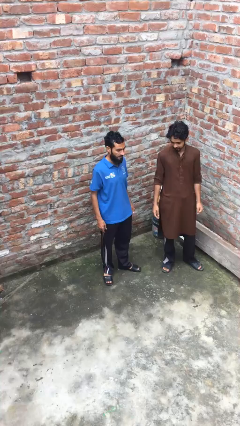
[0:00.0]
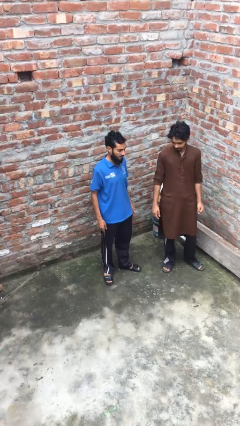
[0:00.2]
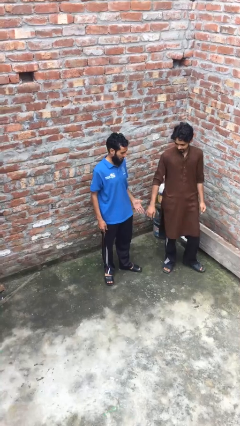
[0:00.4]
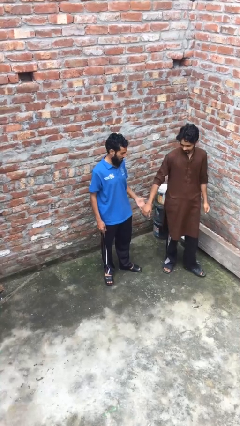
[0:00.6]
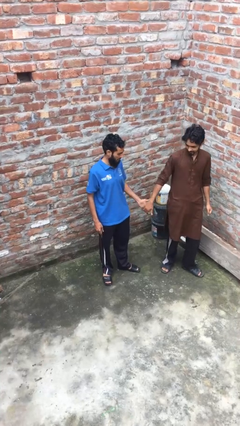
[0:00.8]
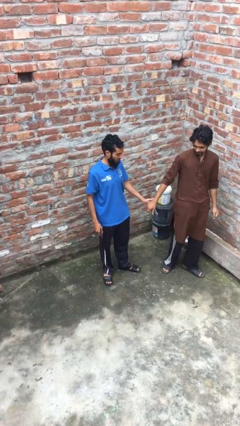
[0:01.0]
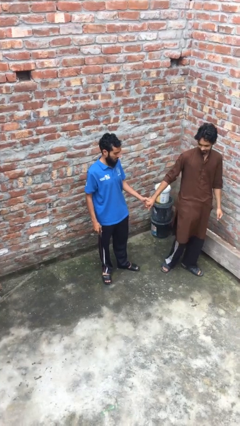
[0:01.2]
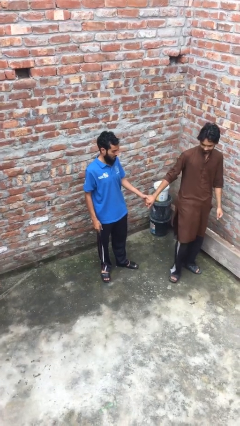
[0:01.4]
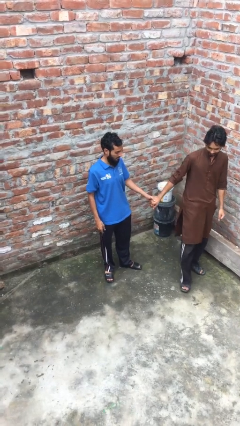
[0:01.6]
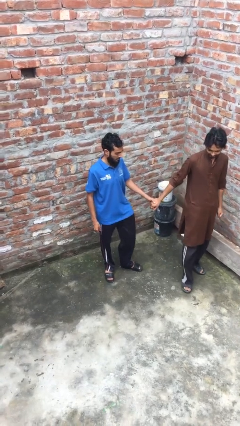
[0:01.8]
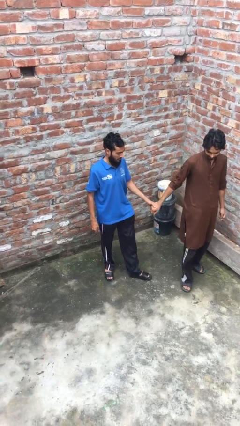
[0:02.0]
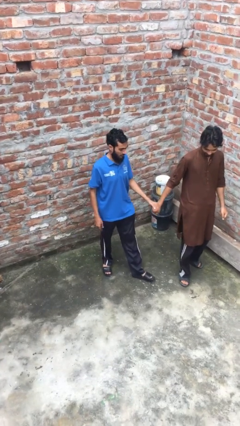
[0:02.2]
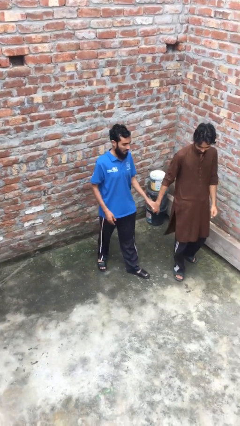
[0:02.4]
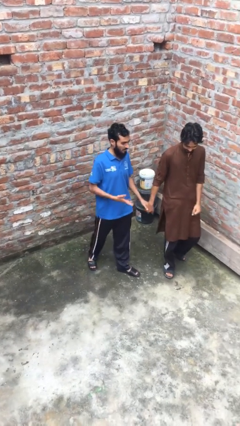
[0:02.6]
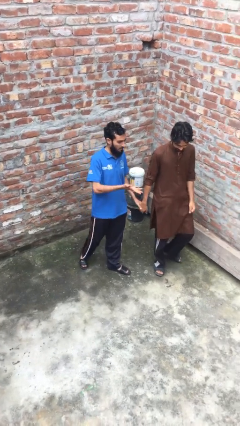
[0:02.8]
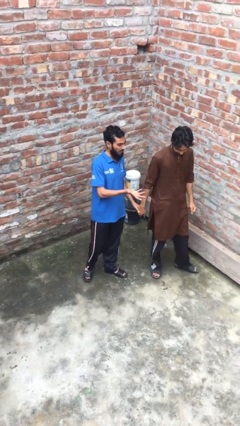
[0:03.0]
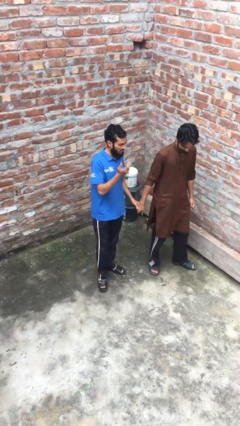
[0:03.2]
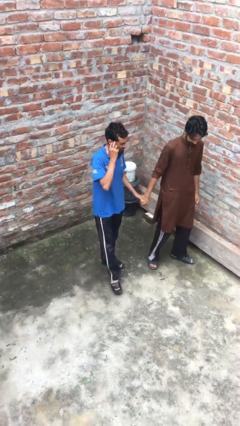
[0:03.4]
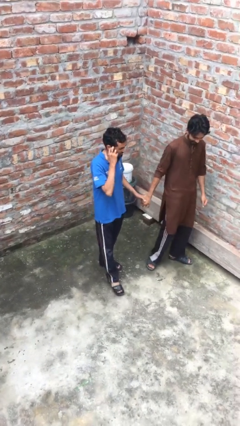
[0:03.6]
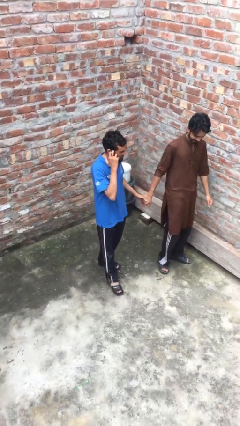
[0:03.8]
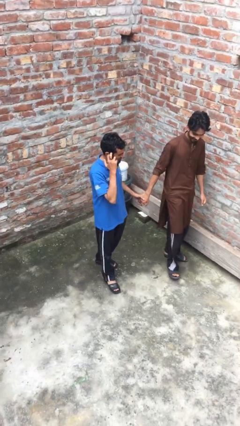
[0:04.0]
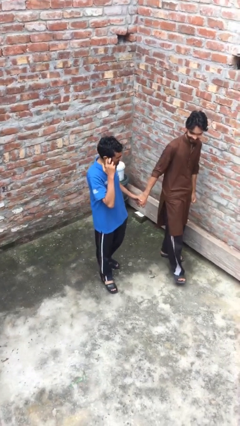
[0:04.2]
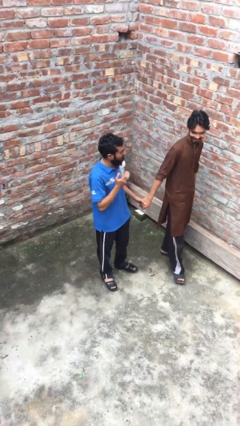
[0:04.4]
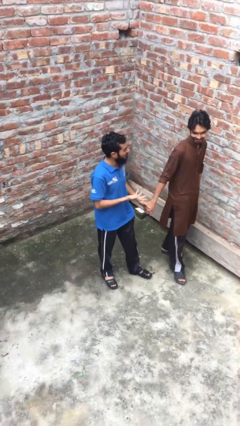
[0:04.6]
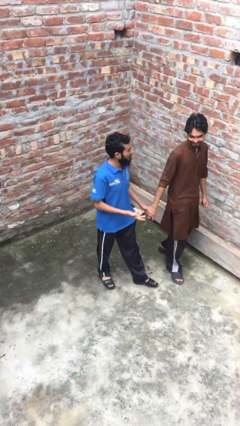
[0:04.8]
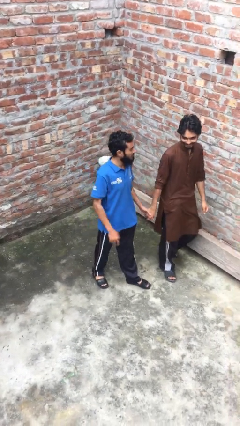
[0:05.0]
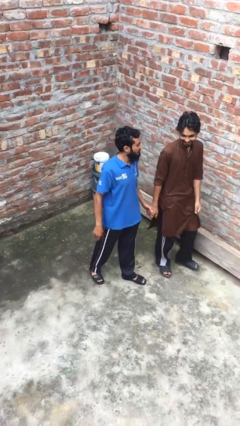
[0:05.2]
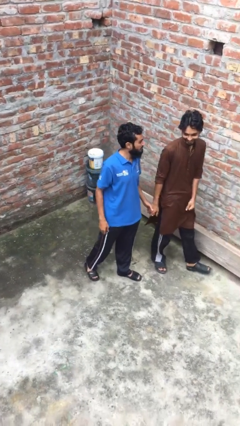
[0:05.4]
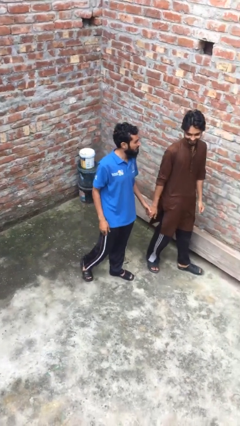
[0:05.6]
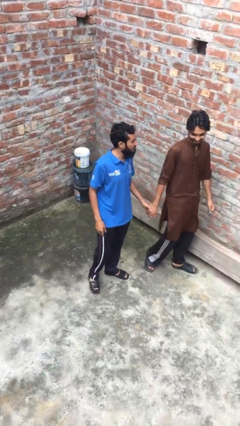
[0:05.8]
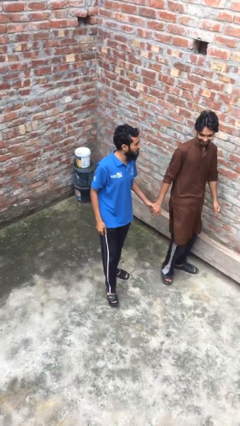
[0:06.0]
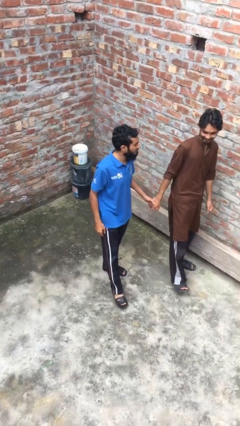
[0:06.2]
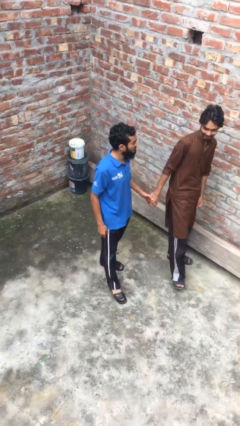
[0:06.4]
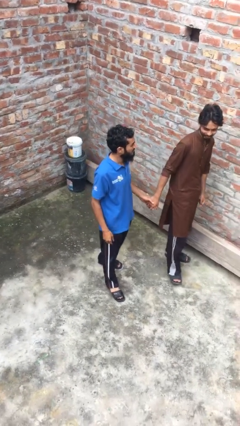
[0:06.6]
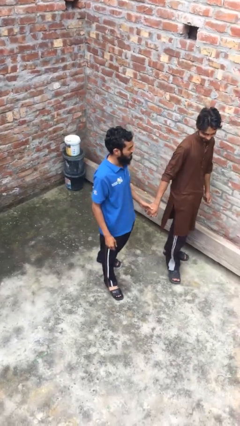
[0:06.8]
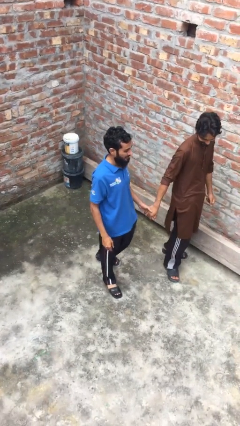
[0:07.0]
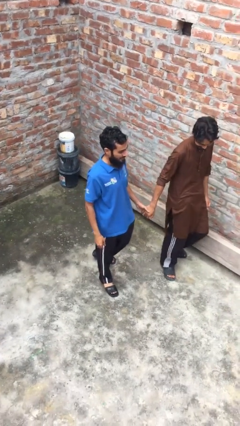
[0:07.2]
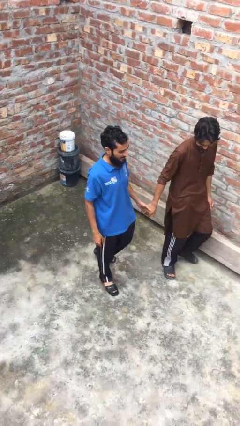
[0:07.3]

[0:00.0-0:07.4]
person holds hand

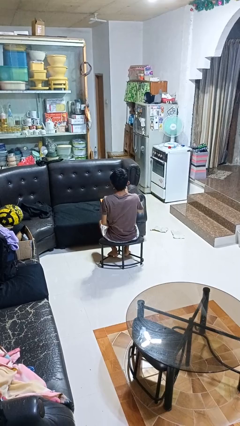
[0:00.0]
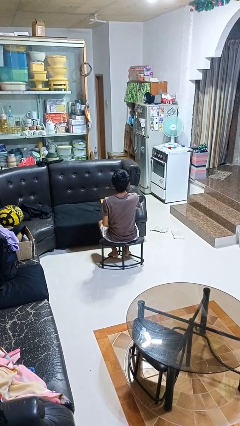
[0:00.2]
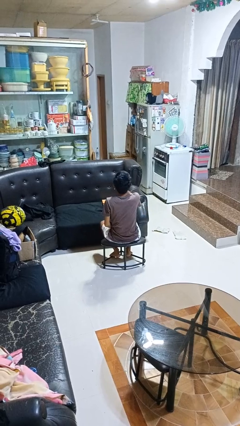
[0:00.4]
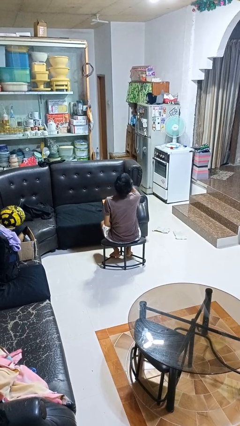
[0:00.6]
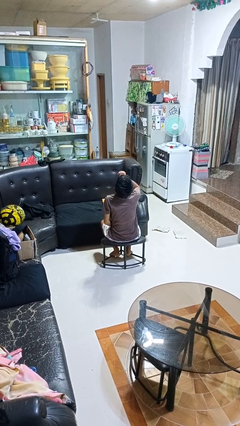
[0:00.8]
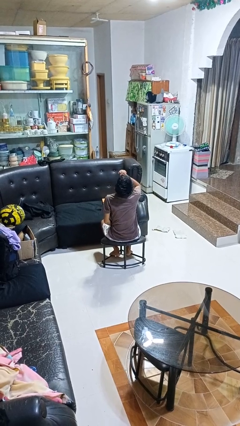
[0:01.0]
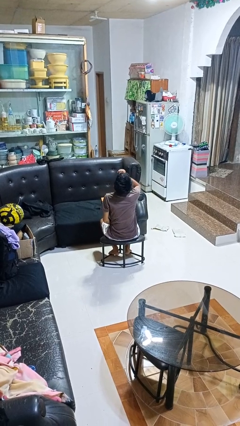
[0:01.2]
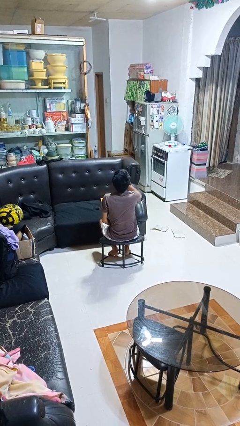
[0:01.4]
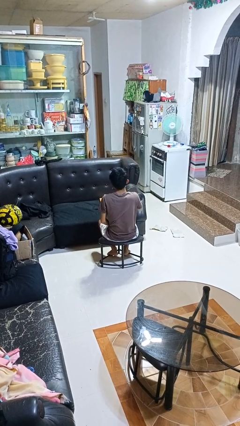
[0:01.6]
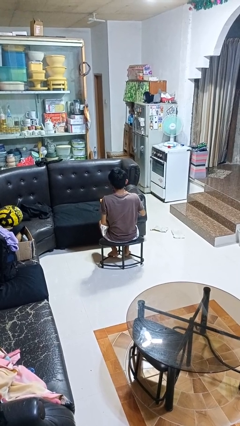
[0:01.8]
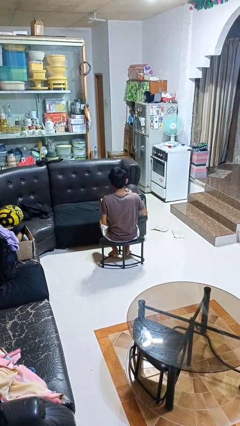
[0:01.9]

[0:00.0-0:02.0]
person drinks from beverage can

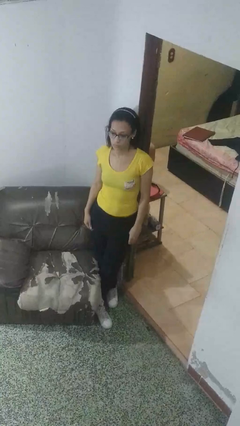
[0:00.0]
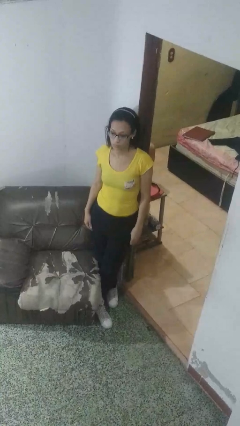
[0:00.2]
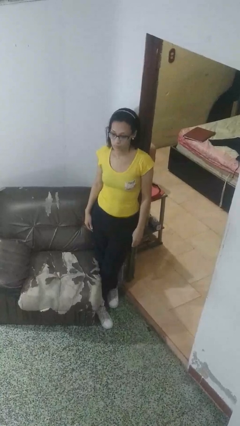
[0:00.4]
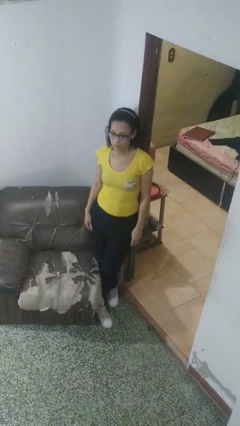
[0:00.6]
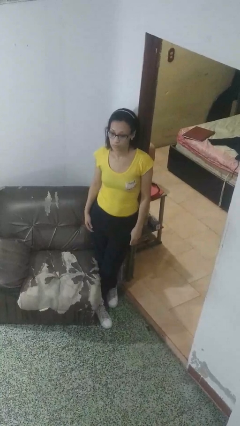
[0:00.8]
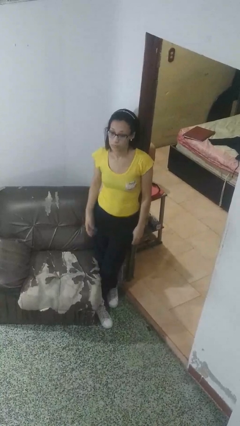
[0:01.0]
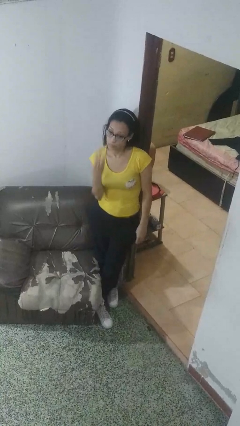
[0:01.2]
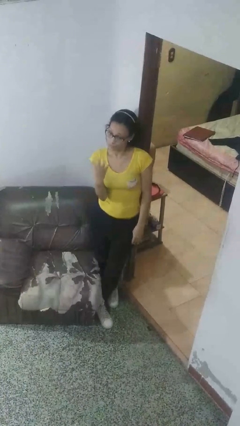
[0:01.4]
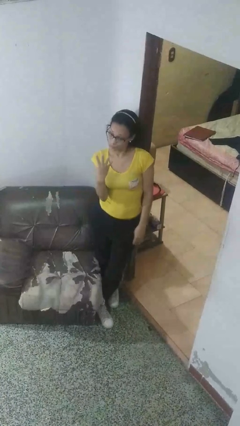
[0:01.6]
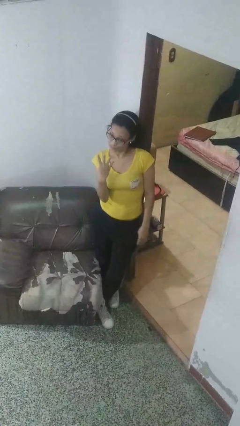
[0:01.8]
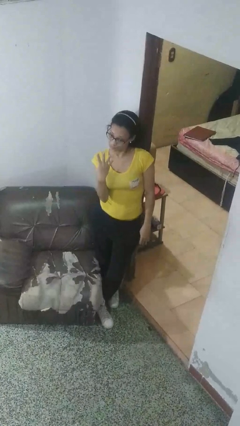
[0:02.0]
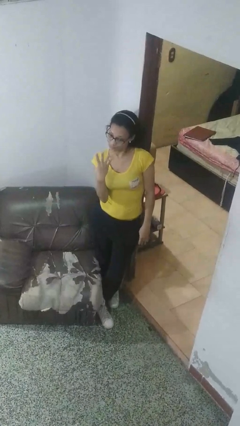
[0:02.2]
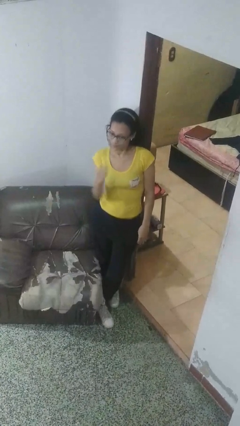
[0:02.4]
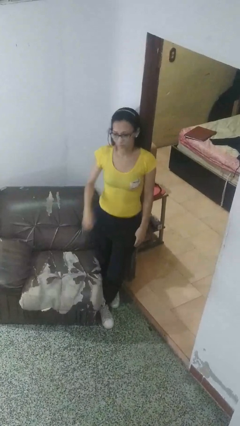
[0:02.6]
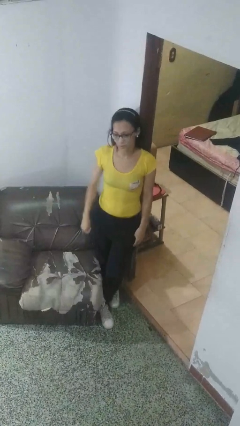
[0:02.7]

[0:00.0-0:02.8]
person gestures number four

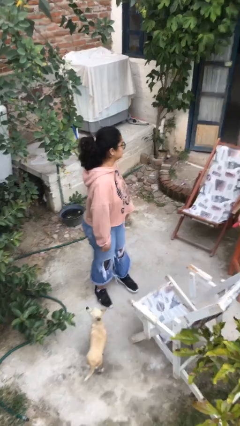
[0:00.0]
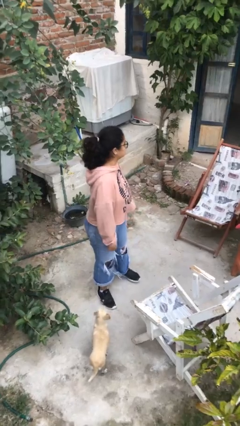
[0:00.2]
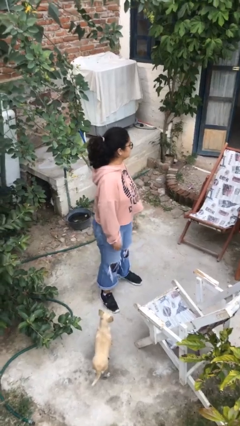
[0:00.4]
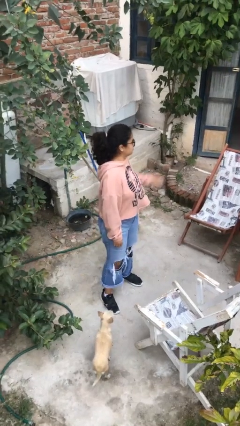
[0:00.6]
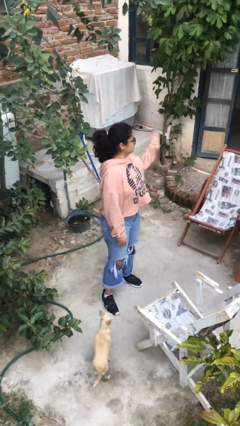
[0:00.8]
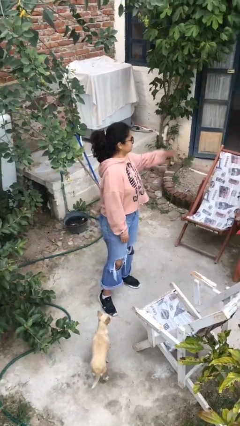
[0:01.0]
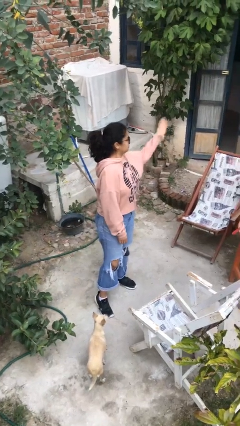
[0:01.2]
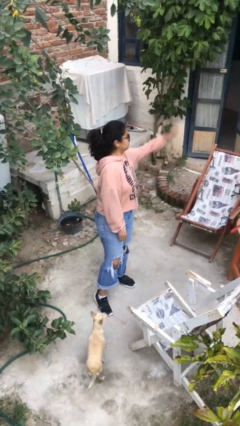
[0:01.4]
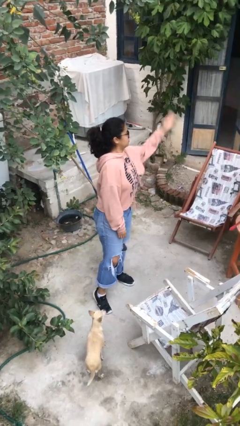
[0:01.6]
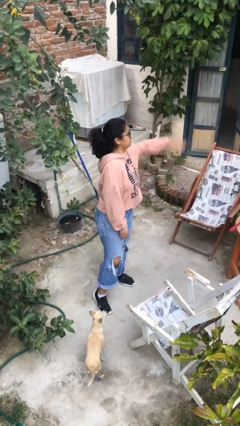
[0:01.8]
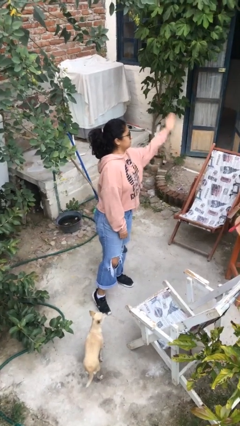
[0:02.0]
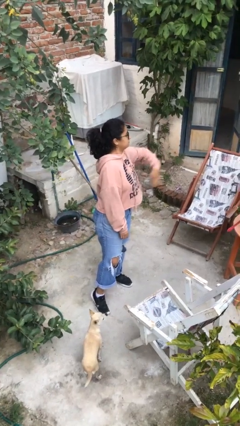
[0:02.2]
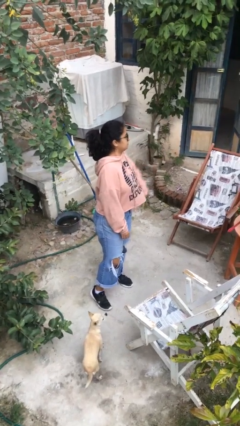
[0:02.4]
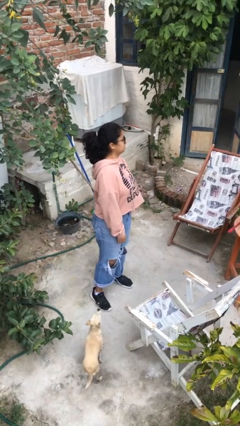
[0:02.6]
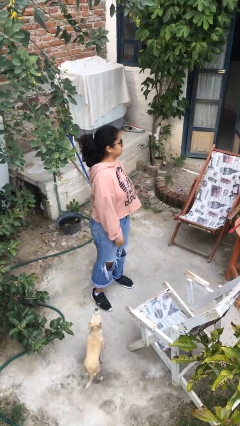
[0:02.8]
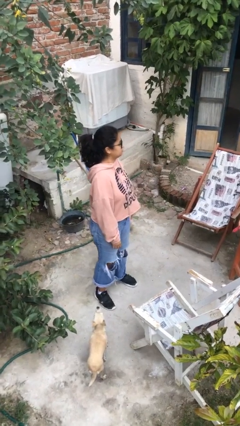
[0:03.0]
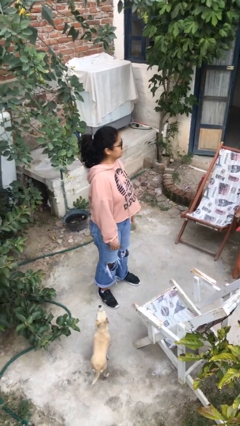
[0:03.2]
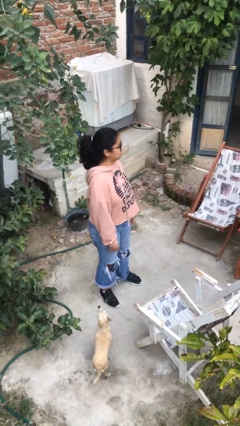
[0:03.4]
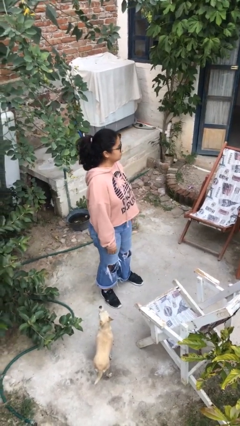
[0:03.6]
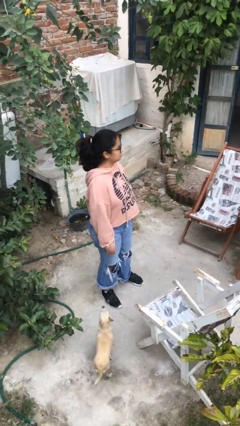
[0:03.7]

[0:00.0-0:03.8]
person punches

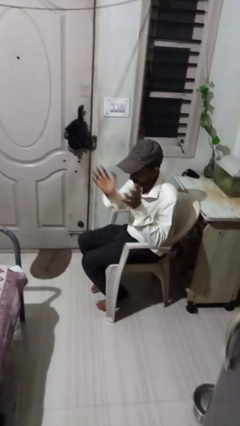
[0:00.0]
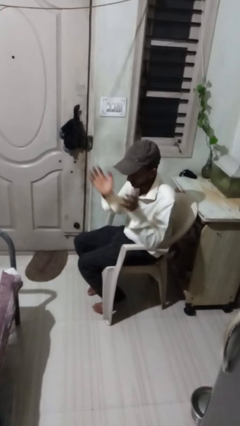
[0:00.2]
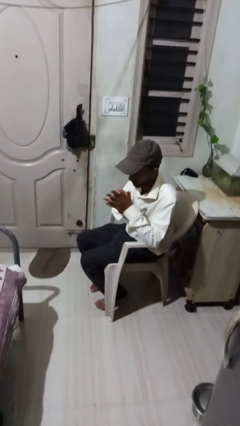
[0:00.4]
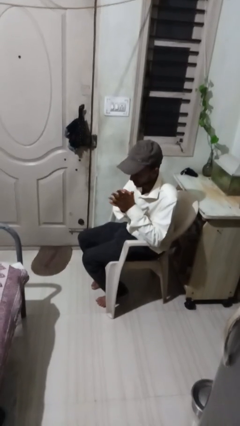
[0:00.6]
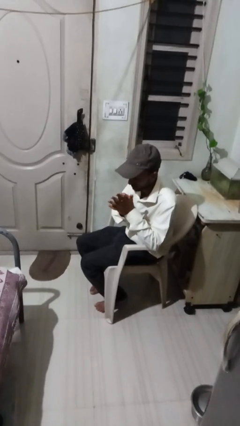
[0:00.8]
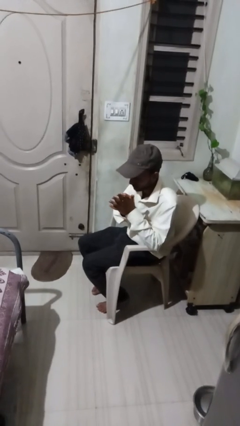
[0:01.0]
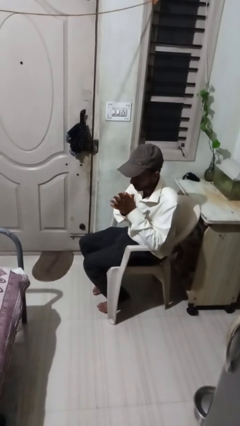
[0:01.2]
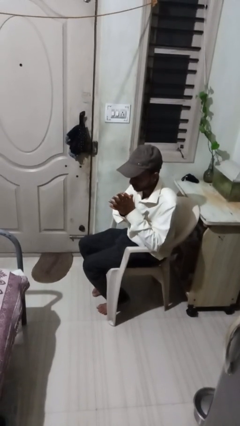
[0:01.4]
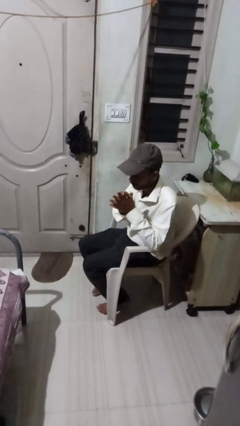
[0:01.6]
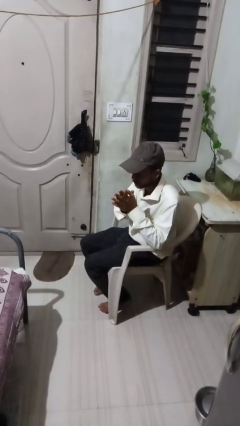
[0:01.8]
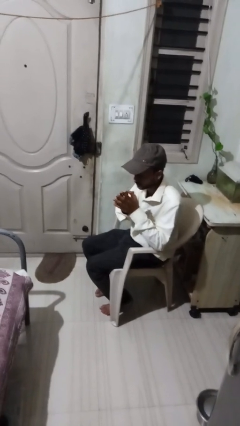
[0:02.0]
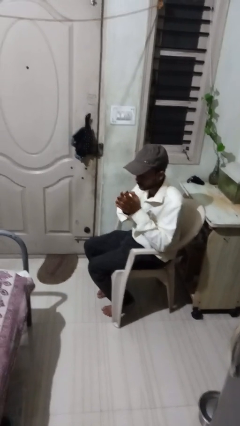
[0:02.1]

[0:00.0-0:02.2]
person claps hands
